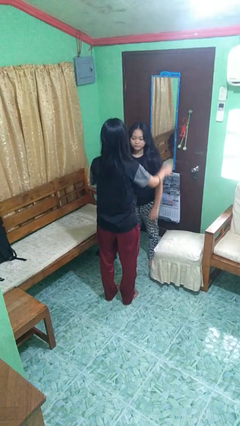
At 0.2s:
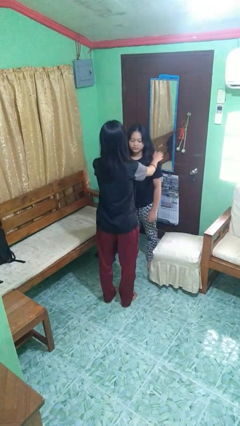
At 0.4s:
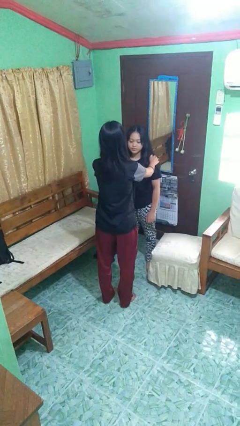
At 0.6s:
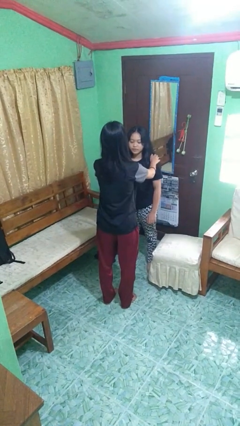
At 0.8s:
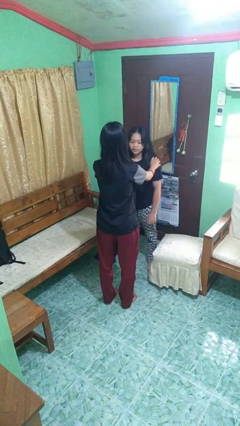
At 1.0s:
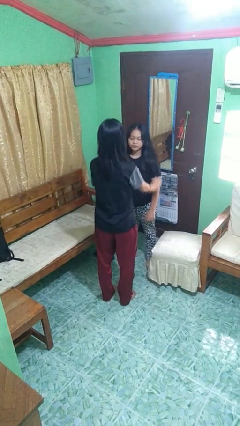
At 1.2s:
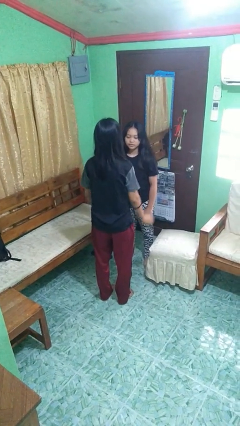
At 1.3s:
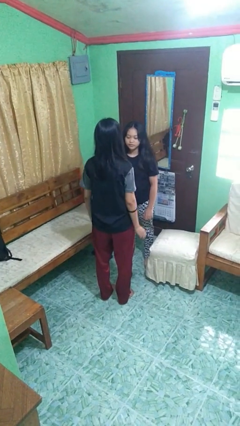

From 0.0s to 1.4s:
person pounds shoulders of person

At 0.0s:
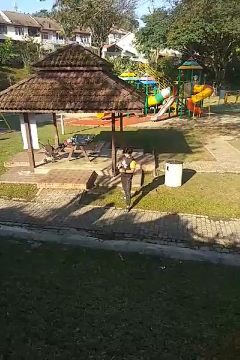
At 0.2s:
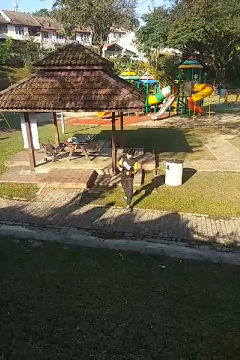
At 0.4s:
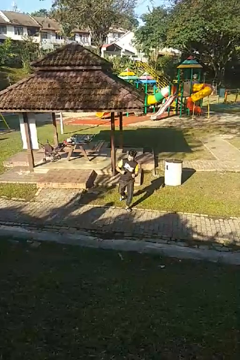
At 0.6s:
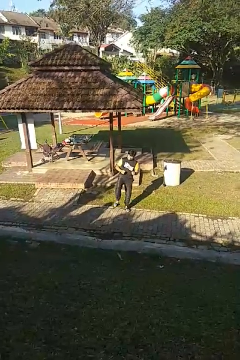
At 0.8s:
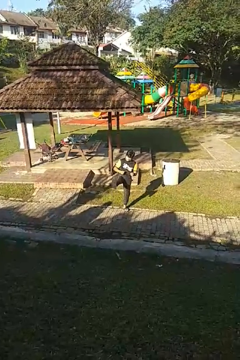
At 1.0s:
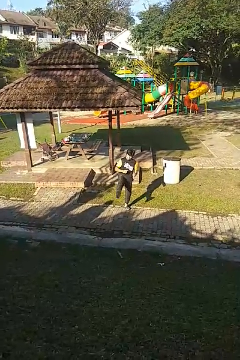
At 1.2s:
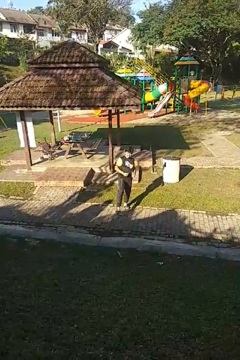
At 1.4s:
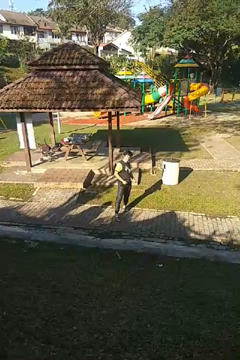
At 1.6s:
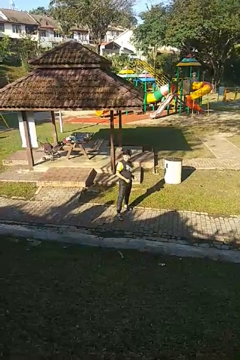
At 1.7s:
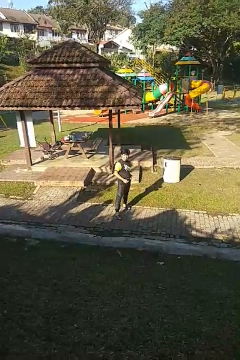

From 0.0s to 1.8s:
person karate kicks

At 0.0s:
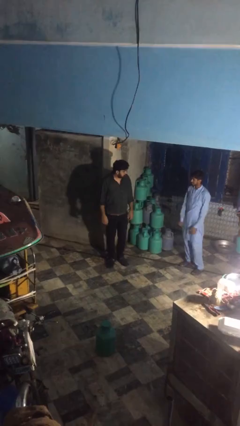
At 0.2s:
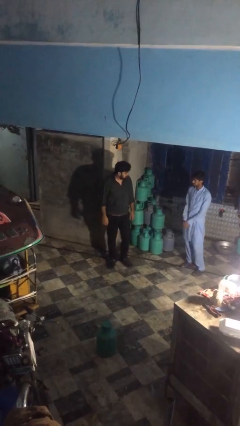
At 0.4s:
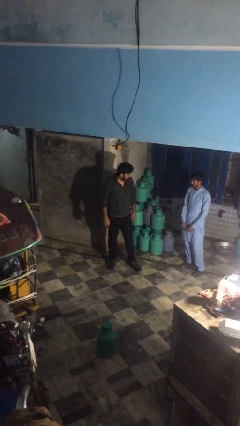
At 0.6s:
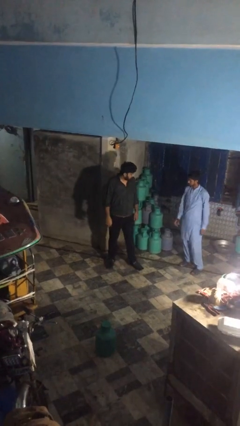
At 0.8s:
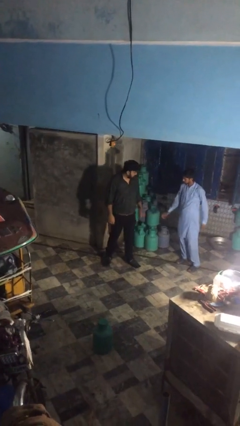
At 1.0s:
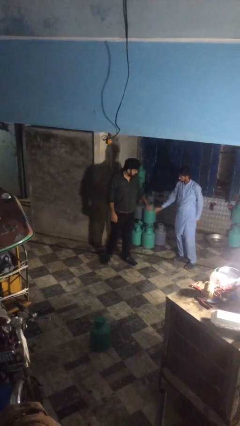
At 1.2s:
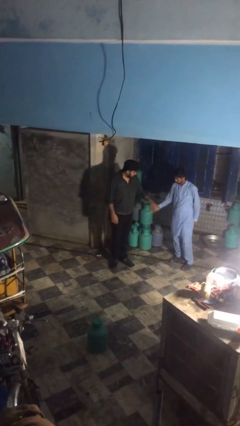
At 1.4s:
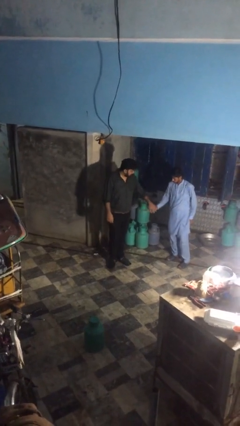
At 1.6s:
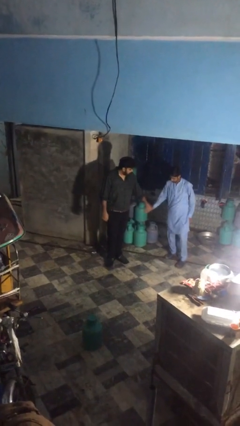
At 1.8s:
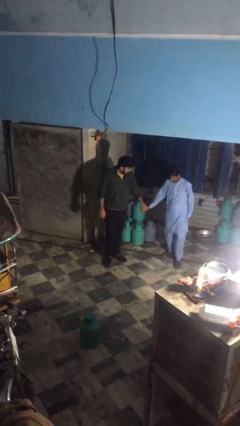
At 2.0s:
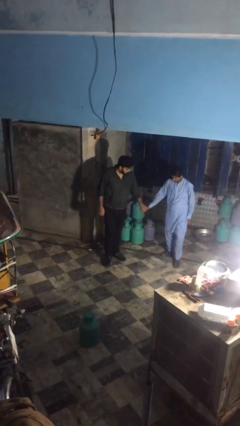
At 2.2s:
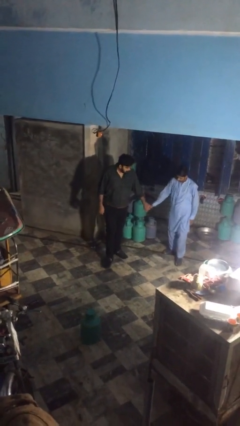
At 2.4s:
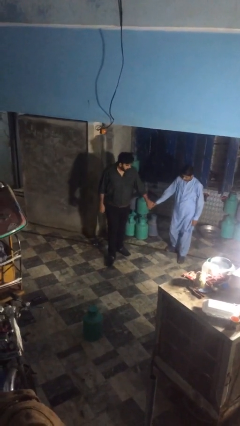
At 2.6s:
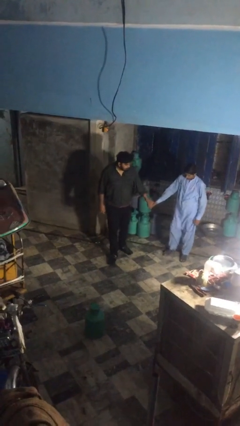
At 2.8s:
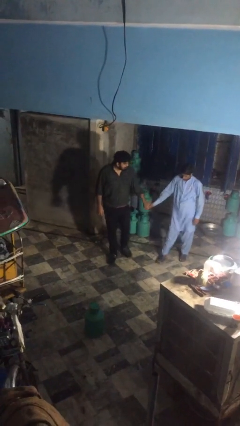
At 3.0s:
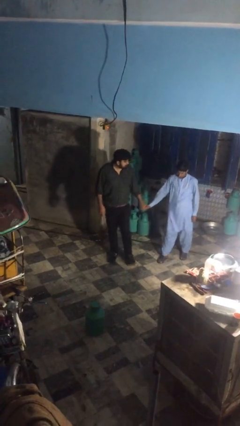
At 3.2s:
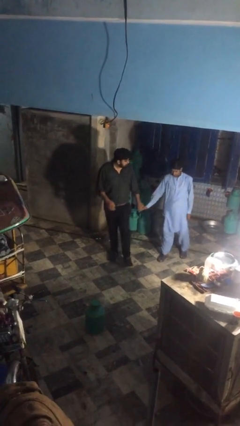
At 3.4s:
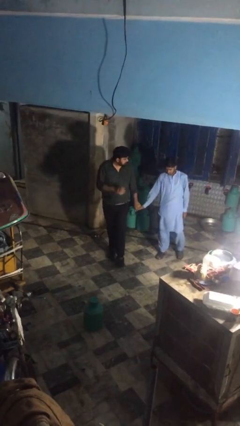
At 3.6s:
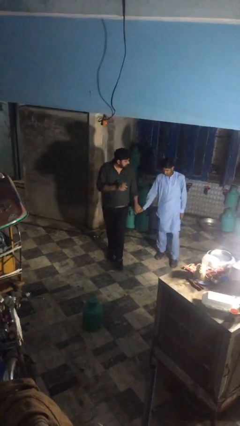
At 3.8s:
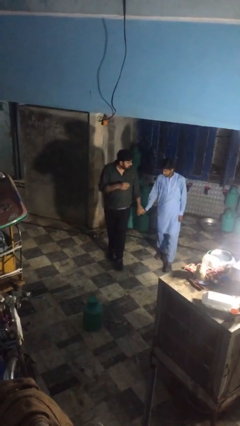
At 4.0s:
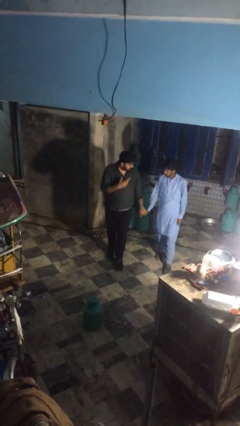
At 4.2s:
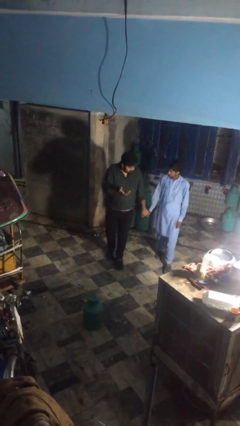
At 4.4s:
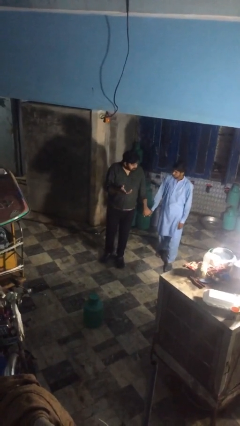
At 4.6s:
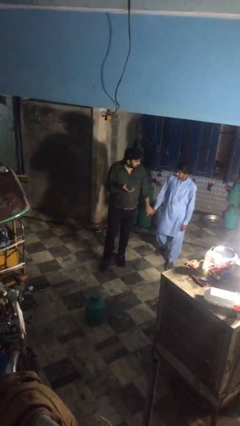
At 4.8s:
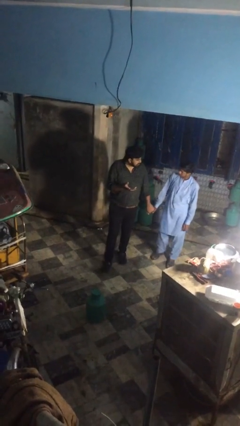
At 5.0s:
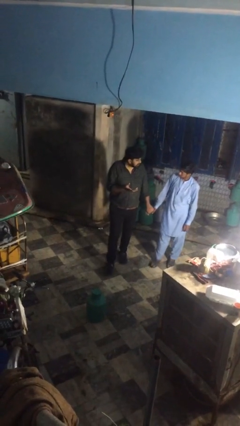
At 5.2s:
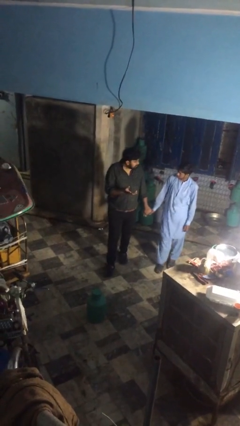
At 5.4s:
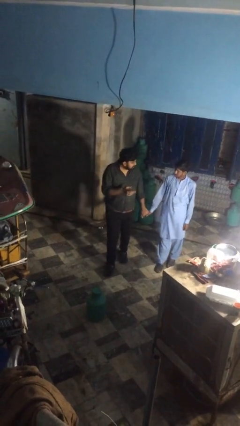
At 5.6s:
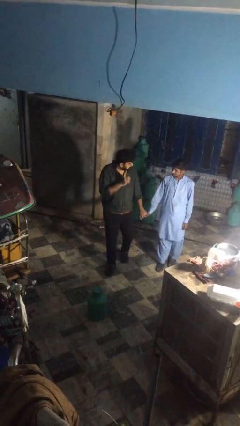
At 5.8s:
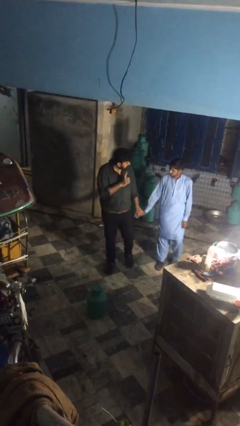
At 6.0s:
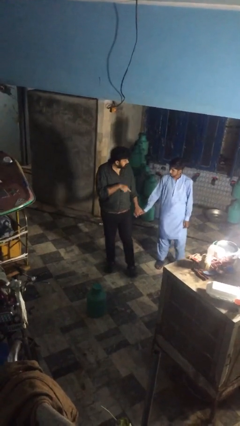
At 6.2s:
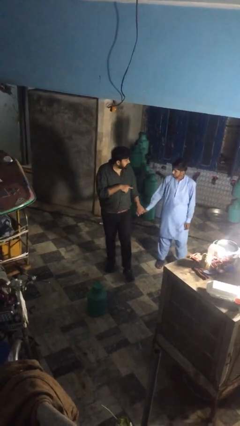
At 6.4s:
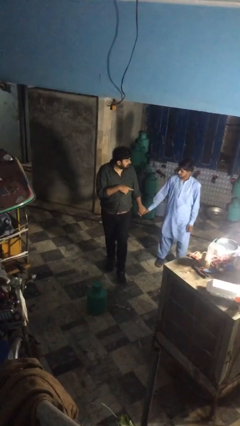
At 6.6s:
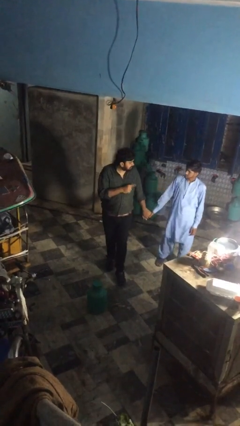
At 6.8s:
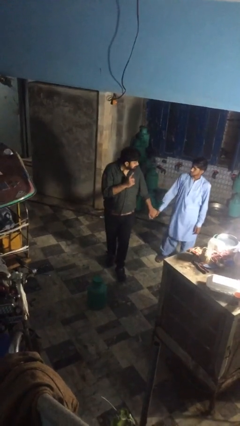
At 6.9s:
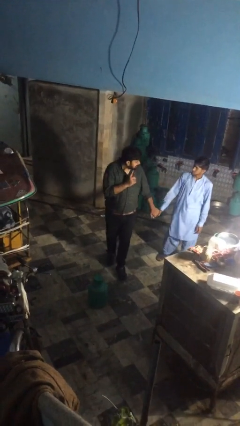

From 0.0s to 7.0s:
person holds hand

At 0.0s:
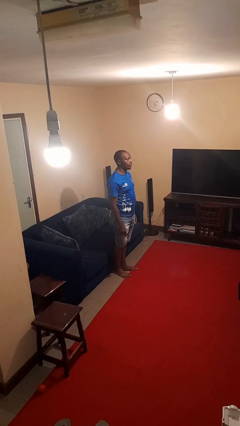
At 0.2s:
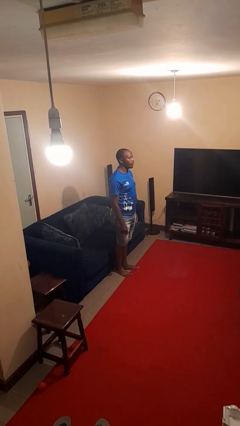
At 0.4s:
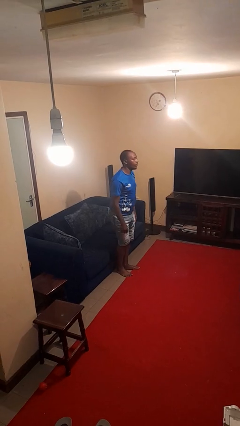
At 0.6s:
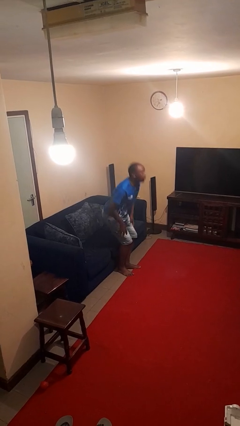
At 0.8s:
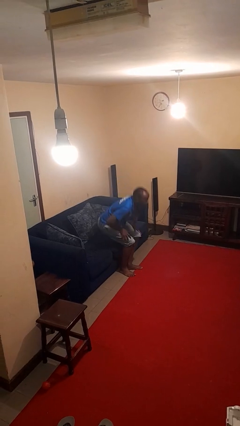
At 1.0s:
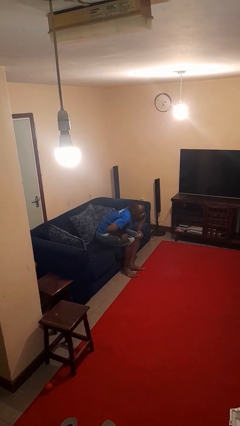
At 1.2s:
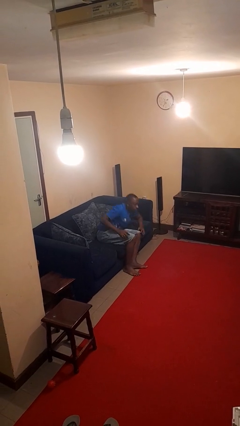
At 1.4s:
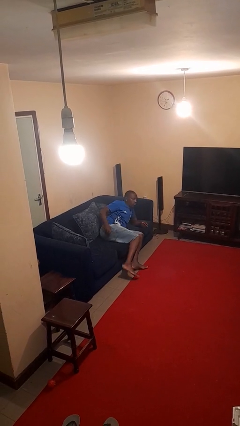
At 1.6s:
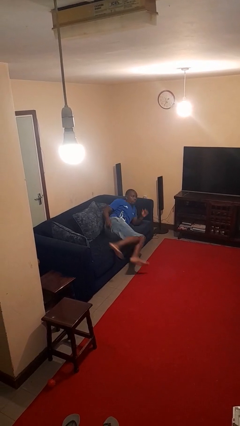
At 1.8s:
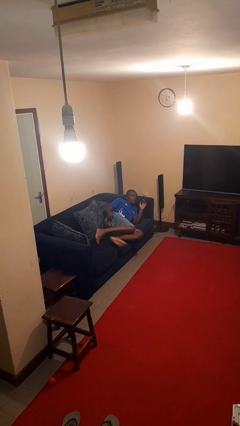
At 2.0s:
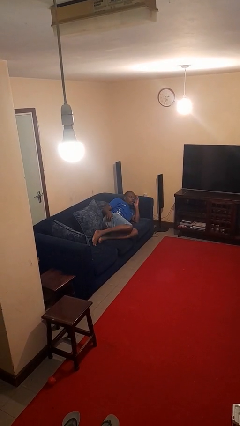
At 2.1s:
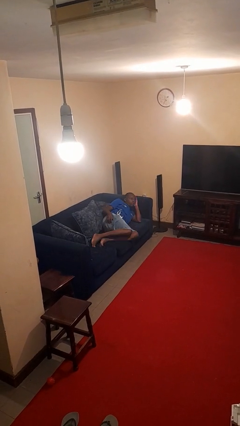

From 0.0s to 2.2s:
person lies down on couch

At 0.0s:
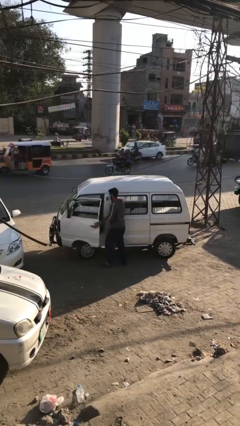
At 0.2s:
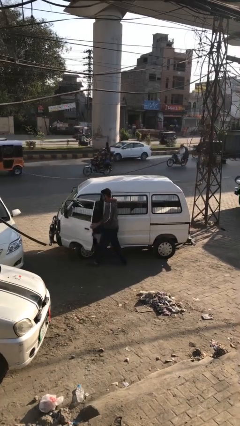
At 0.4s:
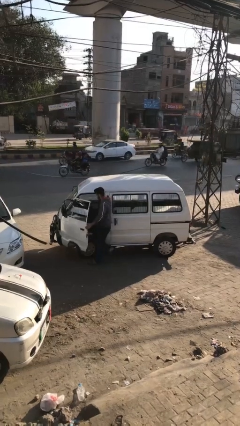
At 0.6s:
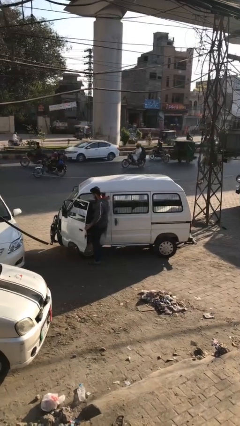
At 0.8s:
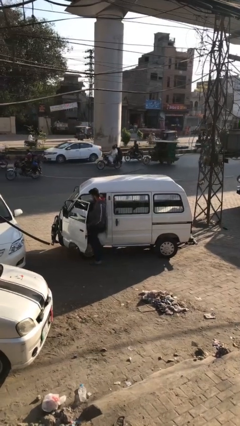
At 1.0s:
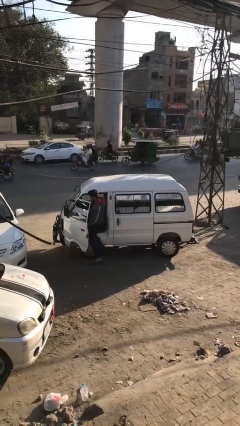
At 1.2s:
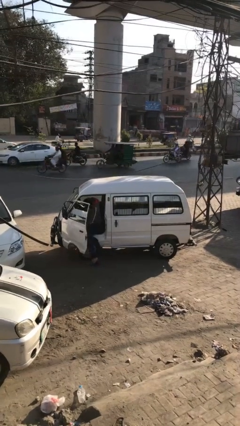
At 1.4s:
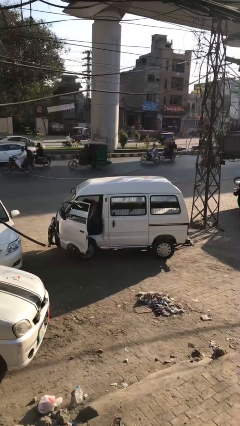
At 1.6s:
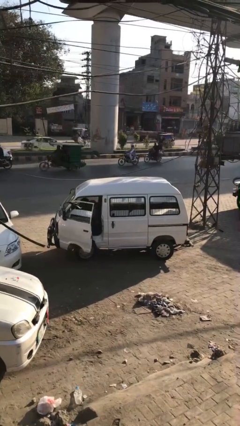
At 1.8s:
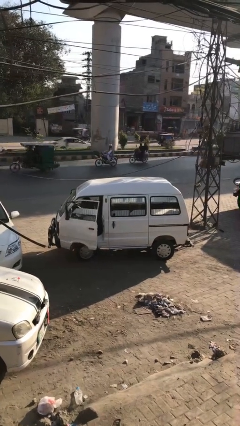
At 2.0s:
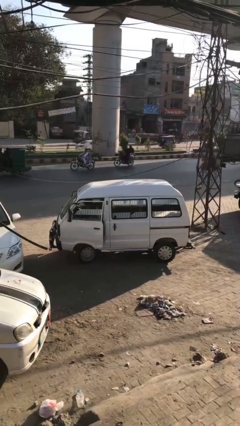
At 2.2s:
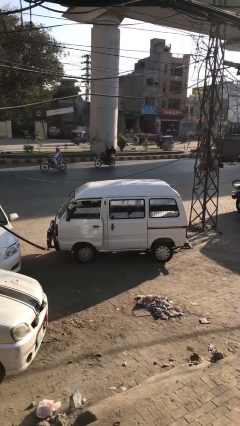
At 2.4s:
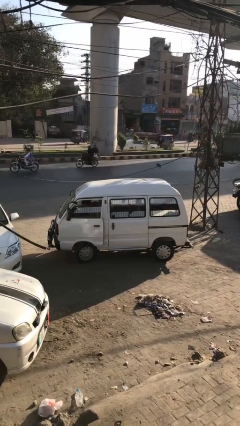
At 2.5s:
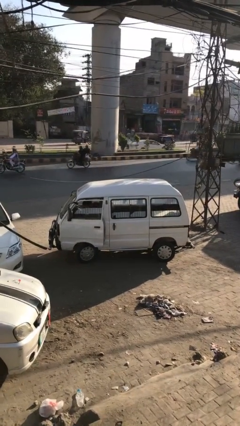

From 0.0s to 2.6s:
car picks up person

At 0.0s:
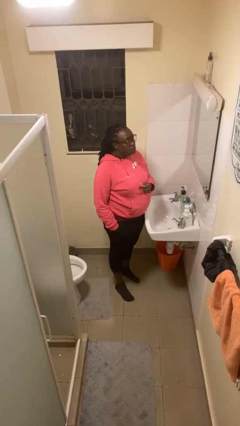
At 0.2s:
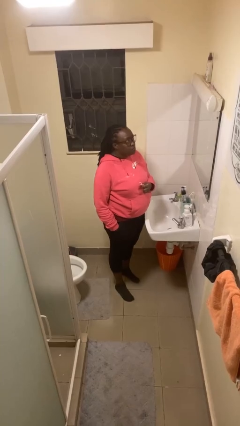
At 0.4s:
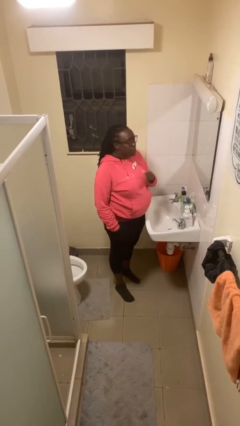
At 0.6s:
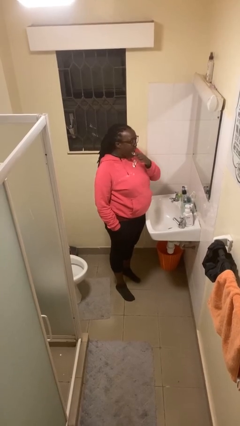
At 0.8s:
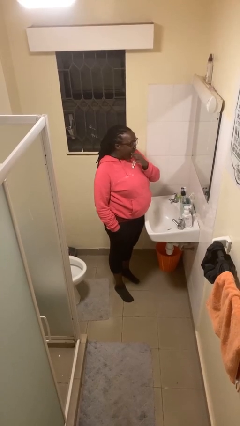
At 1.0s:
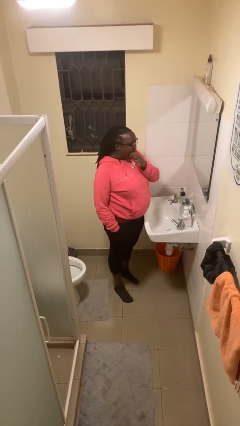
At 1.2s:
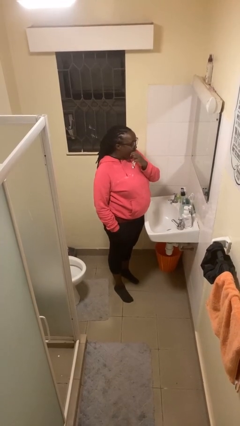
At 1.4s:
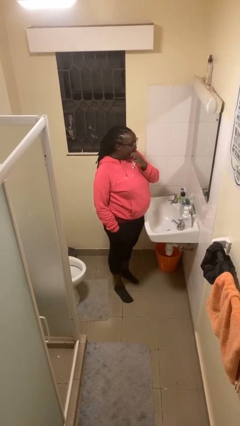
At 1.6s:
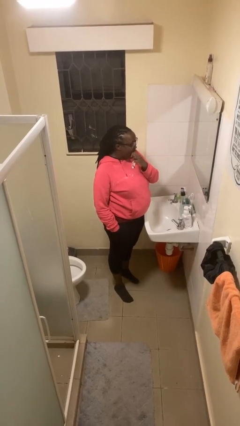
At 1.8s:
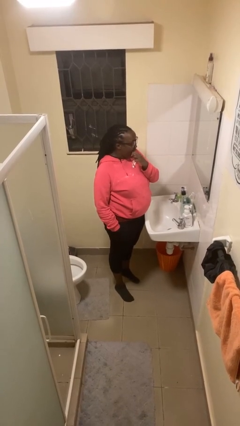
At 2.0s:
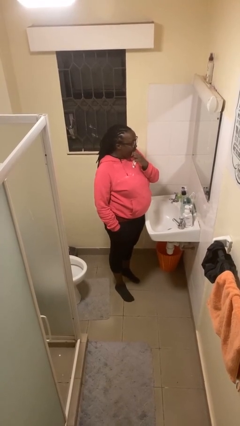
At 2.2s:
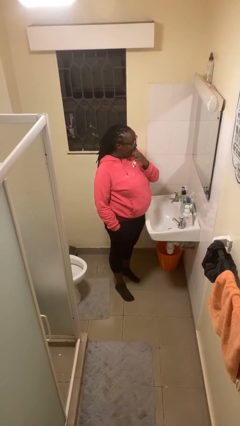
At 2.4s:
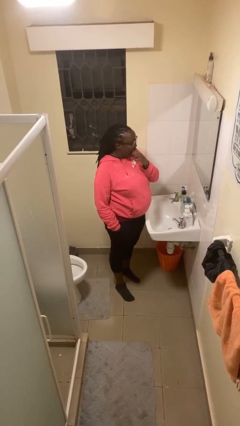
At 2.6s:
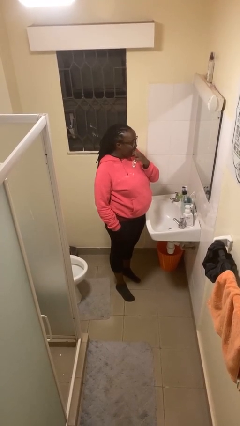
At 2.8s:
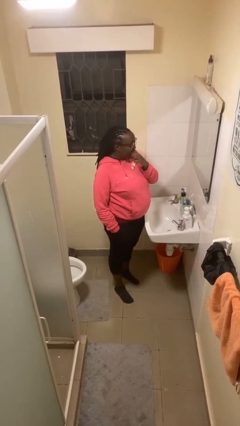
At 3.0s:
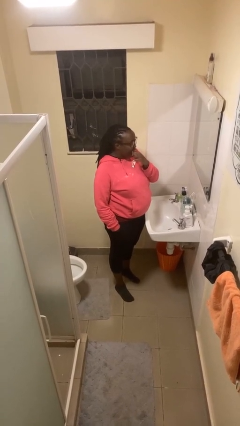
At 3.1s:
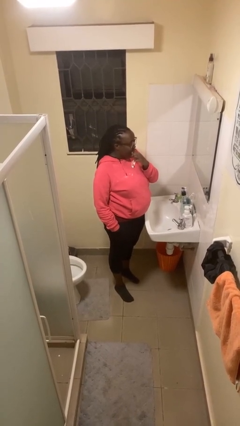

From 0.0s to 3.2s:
person flosses
